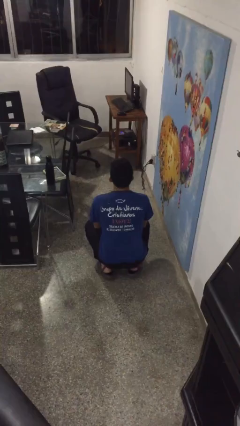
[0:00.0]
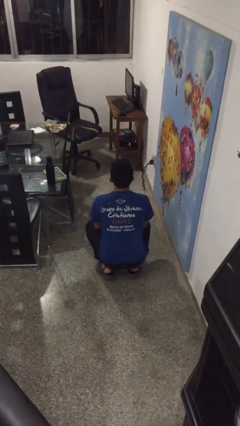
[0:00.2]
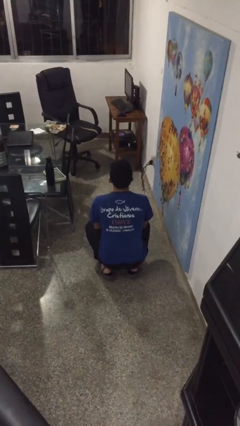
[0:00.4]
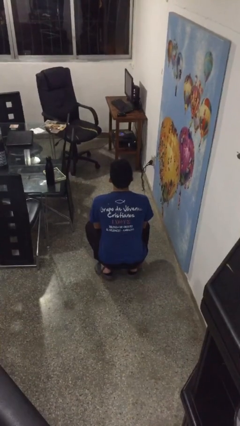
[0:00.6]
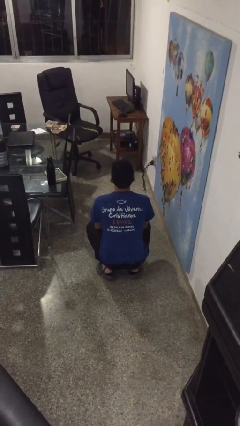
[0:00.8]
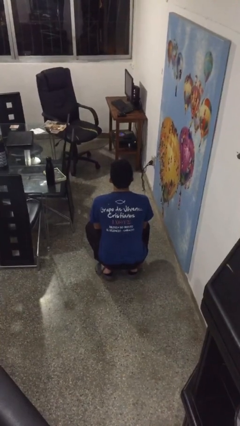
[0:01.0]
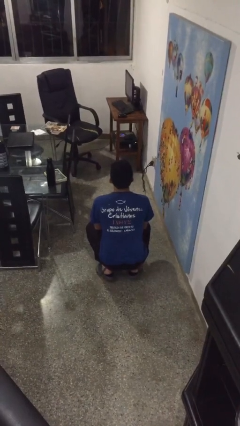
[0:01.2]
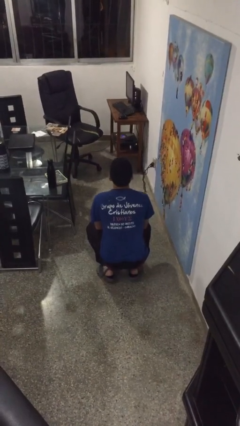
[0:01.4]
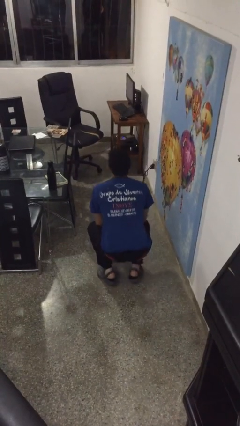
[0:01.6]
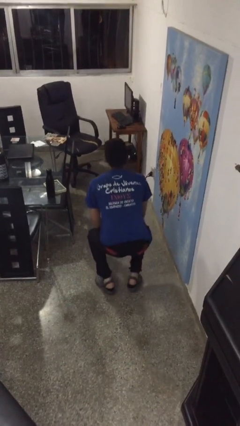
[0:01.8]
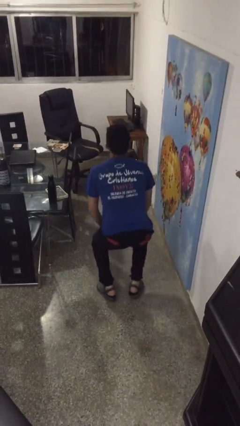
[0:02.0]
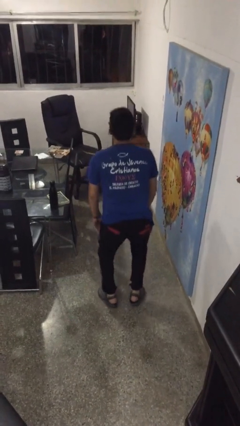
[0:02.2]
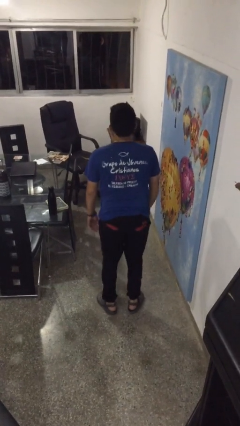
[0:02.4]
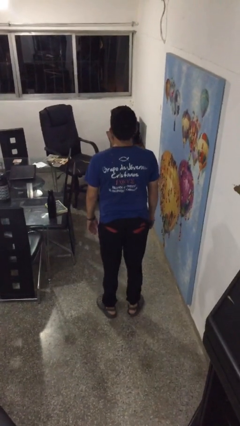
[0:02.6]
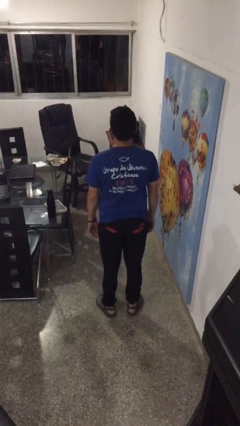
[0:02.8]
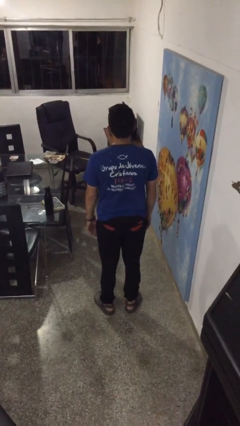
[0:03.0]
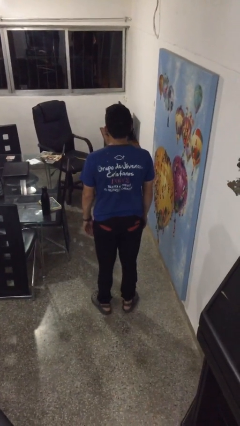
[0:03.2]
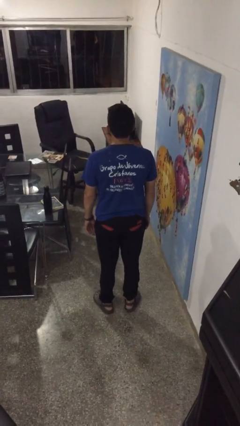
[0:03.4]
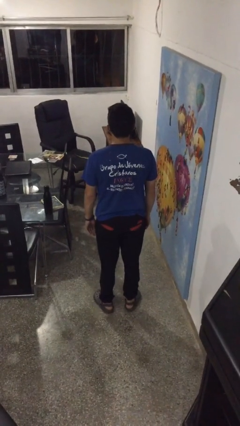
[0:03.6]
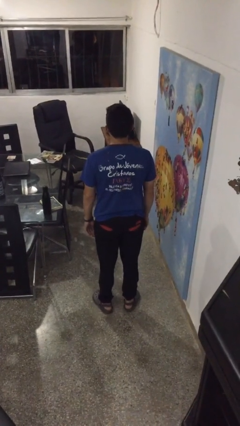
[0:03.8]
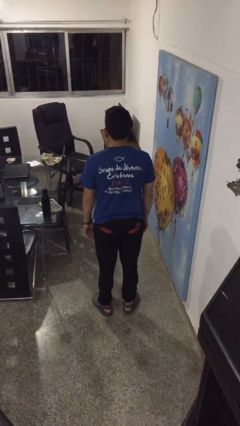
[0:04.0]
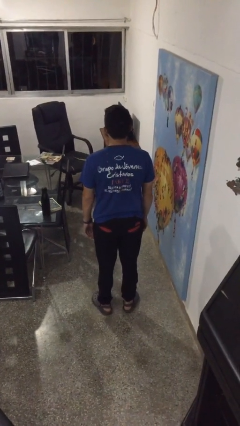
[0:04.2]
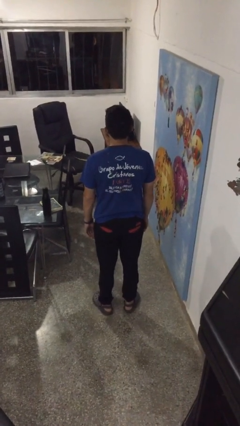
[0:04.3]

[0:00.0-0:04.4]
person stands up

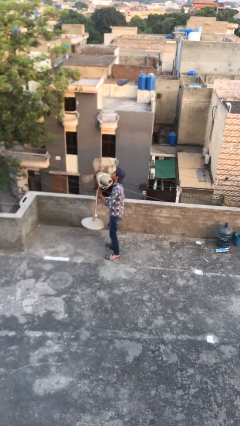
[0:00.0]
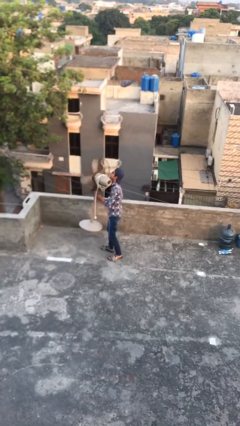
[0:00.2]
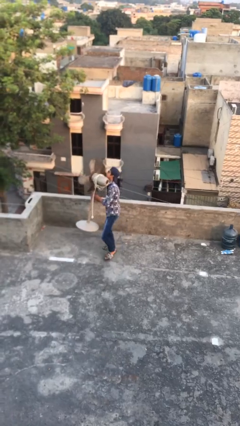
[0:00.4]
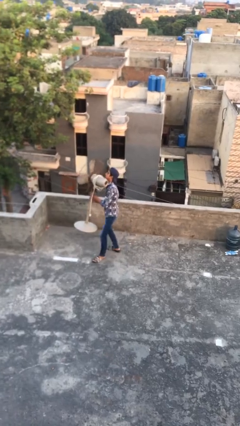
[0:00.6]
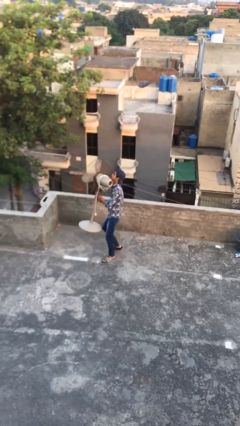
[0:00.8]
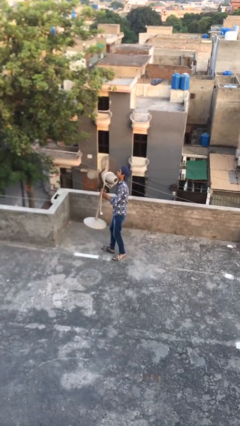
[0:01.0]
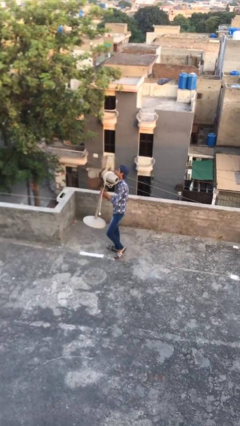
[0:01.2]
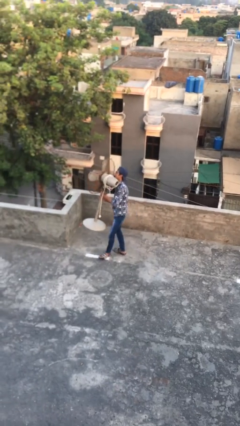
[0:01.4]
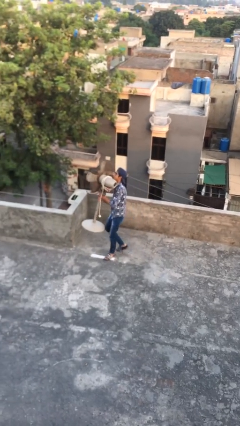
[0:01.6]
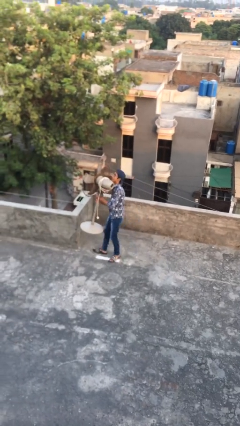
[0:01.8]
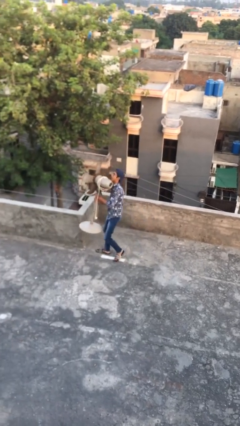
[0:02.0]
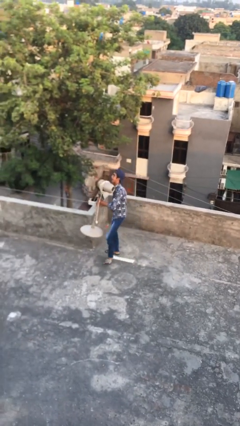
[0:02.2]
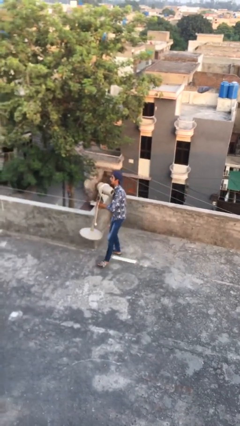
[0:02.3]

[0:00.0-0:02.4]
person carries heavy object

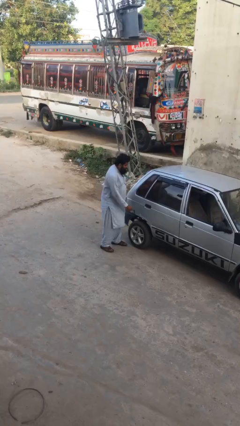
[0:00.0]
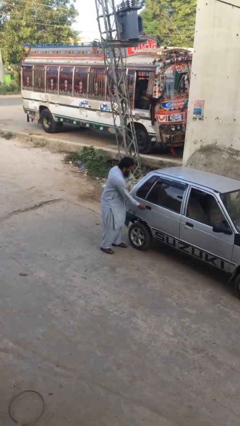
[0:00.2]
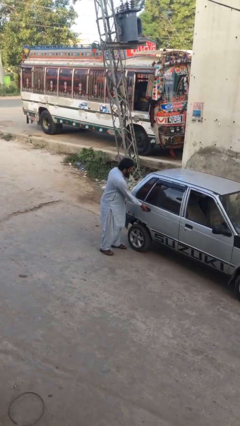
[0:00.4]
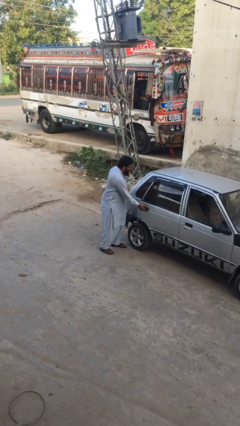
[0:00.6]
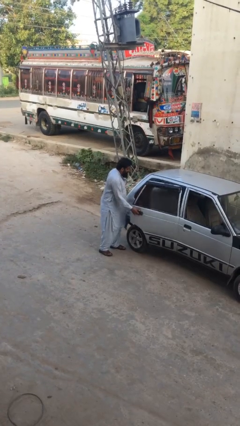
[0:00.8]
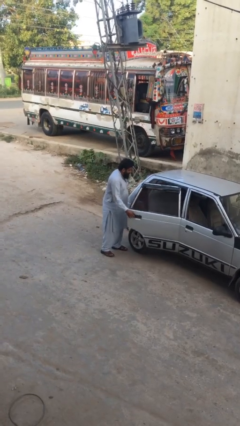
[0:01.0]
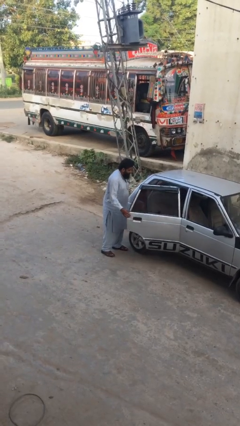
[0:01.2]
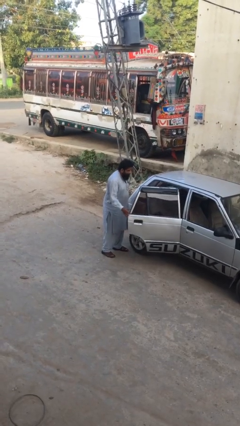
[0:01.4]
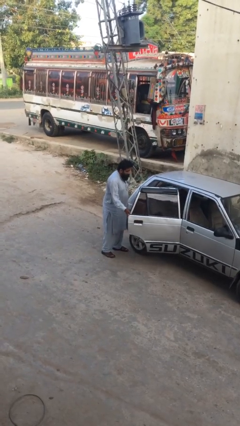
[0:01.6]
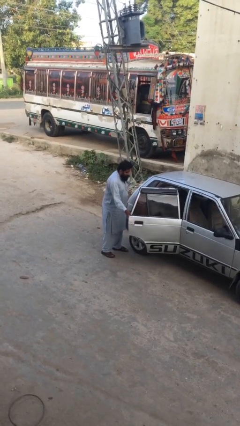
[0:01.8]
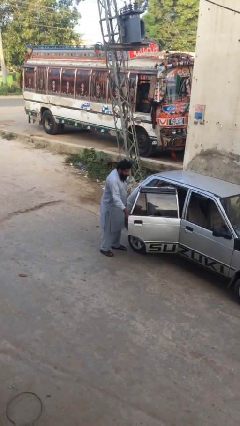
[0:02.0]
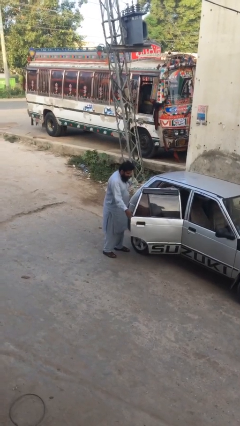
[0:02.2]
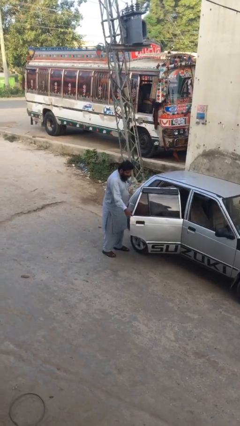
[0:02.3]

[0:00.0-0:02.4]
person opens car door

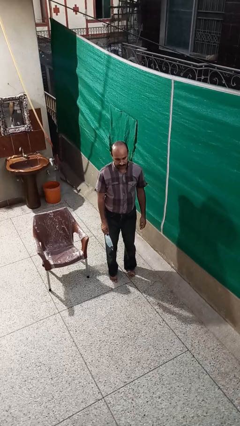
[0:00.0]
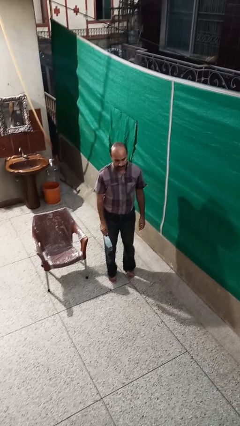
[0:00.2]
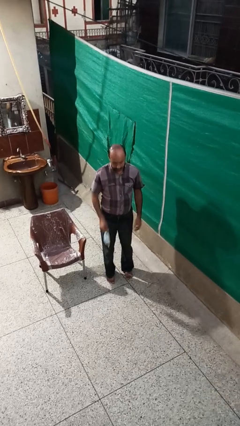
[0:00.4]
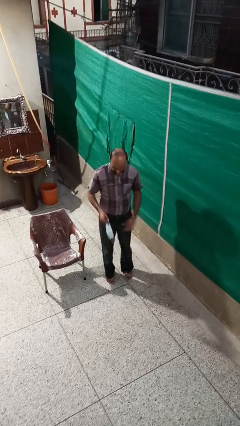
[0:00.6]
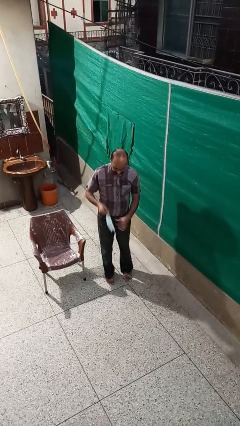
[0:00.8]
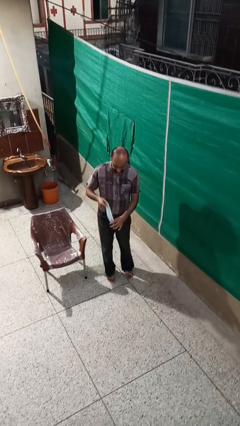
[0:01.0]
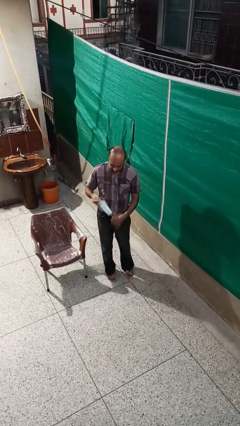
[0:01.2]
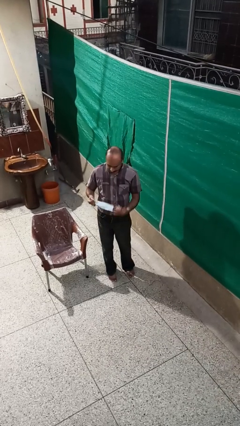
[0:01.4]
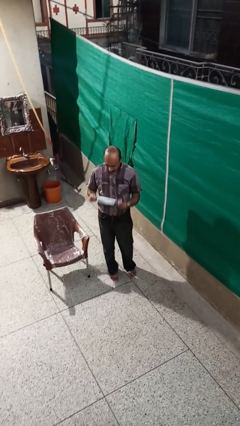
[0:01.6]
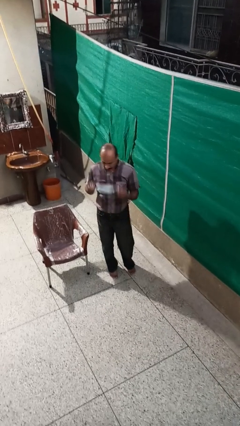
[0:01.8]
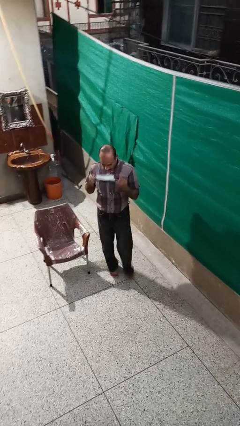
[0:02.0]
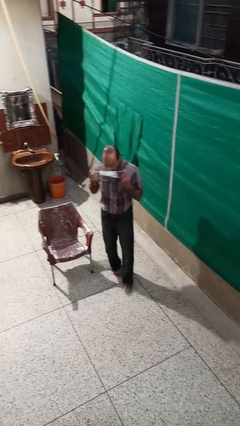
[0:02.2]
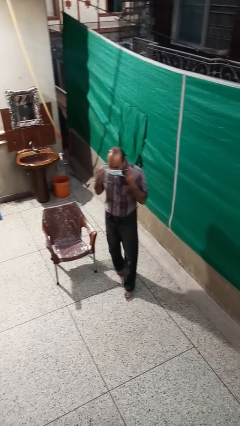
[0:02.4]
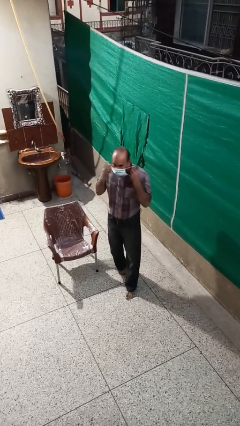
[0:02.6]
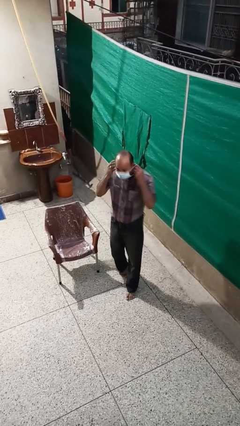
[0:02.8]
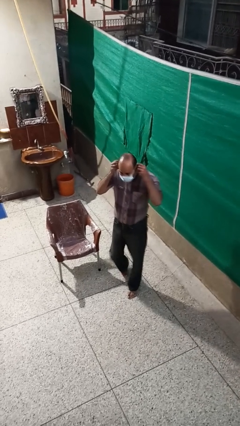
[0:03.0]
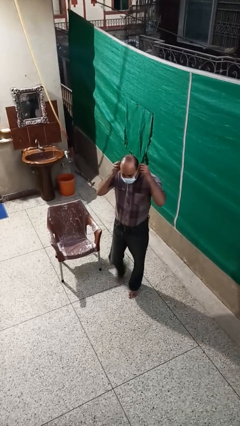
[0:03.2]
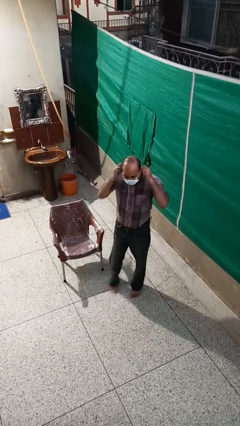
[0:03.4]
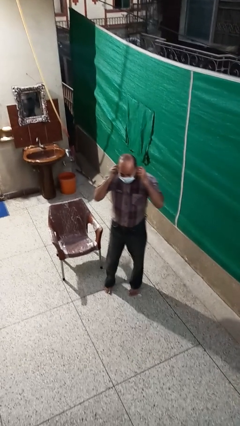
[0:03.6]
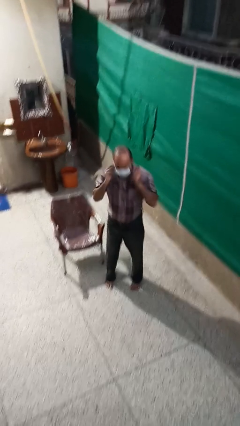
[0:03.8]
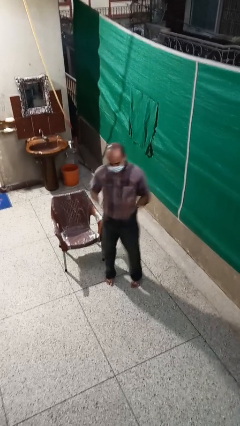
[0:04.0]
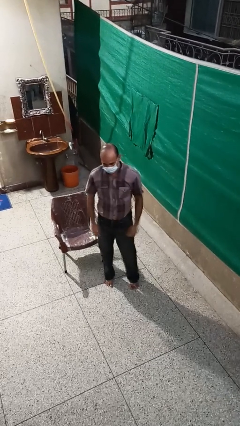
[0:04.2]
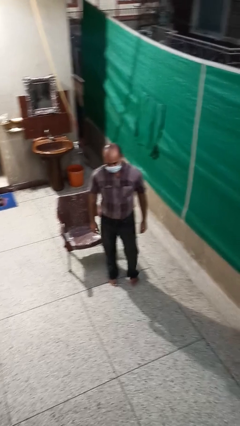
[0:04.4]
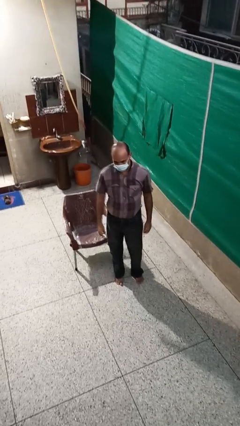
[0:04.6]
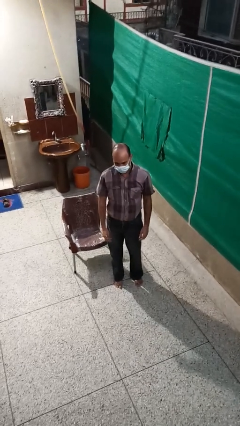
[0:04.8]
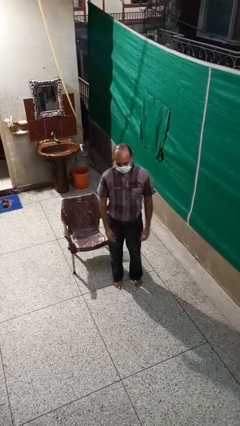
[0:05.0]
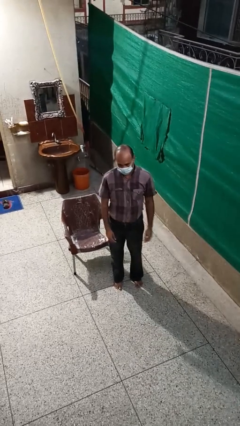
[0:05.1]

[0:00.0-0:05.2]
person puts on facemask

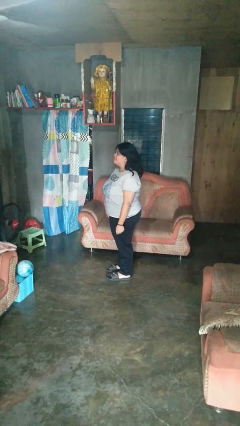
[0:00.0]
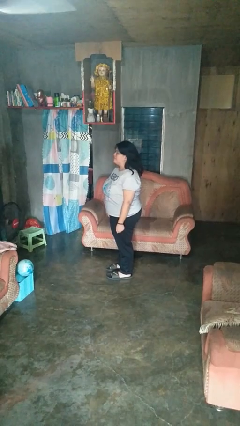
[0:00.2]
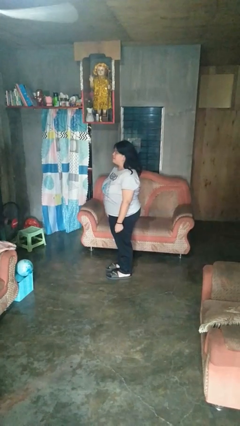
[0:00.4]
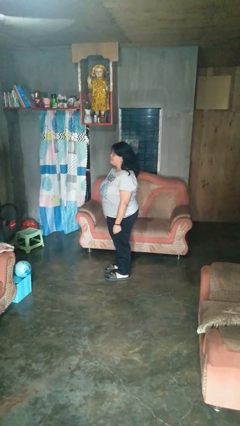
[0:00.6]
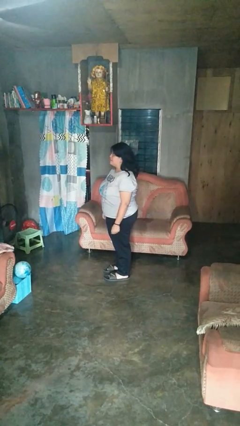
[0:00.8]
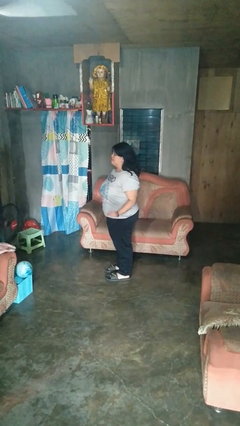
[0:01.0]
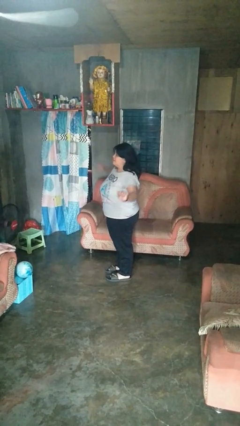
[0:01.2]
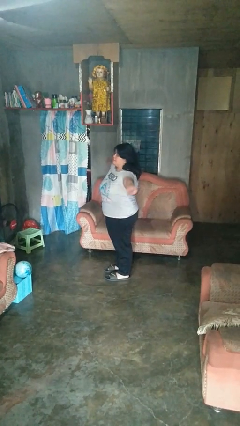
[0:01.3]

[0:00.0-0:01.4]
person stretches arms to side

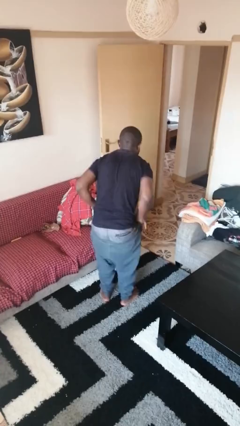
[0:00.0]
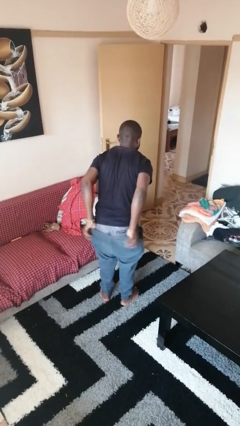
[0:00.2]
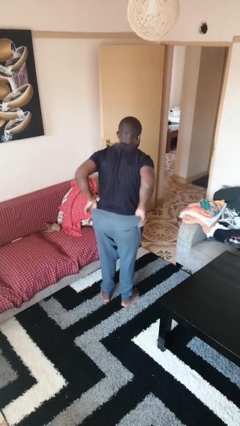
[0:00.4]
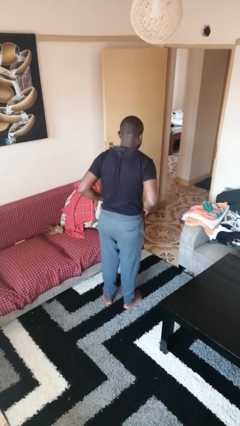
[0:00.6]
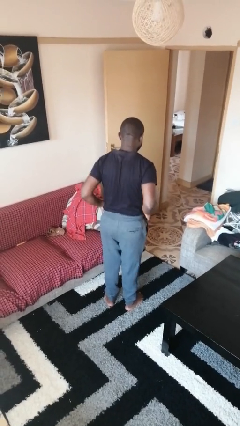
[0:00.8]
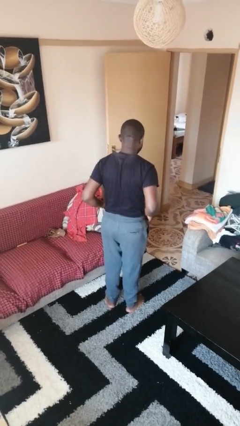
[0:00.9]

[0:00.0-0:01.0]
person puts on pants

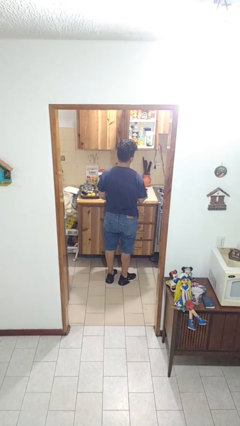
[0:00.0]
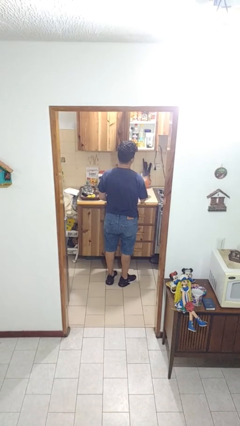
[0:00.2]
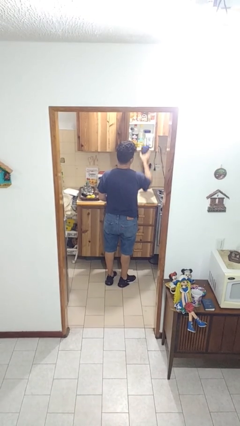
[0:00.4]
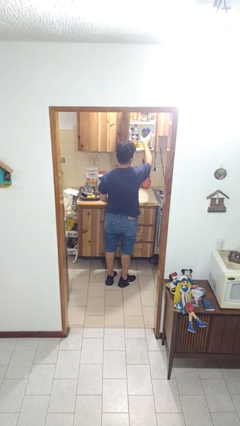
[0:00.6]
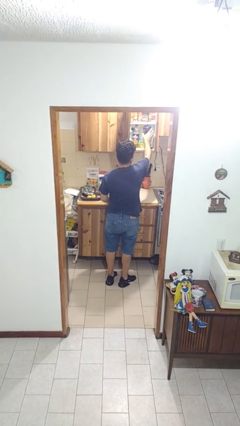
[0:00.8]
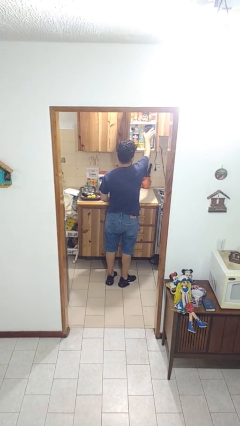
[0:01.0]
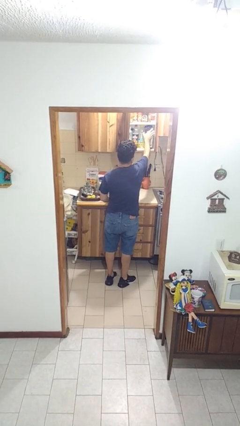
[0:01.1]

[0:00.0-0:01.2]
person puts object in cabinet
